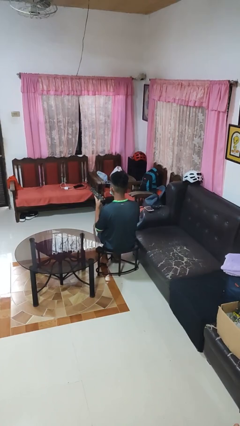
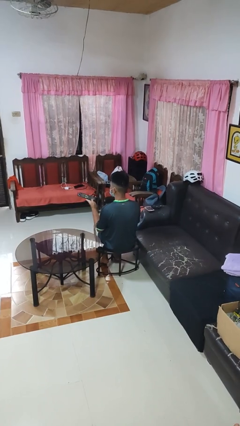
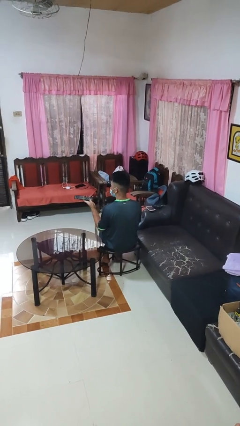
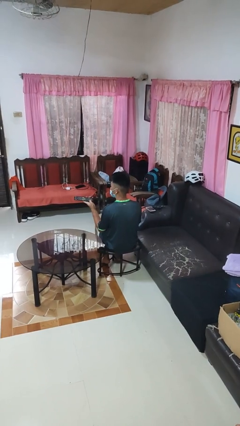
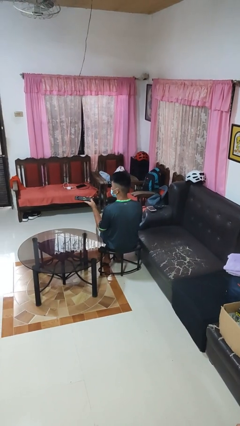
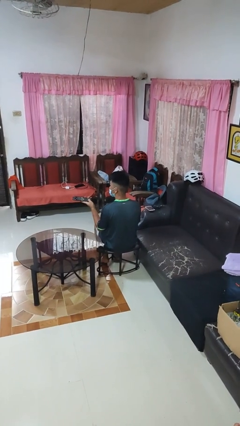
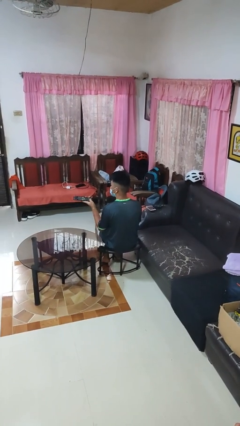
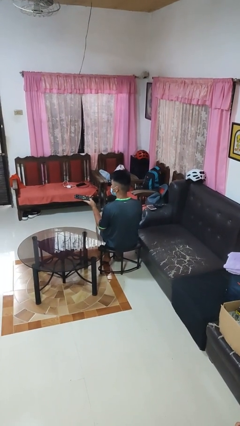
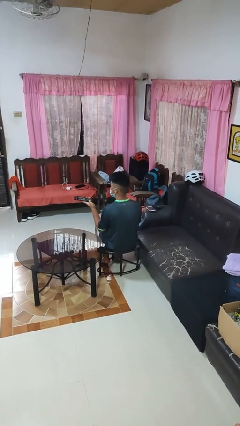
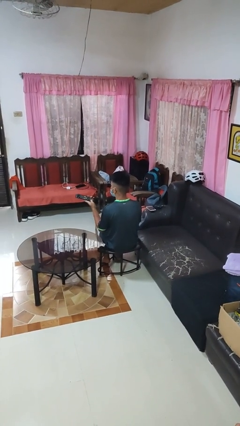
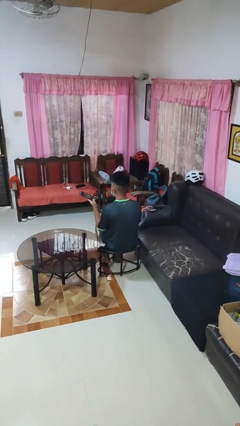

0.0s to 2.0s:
person uses television remote

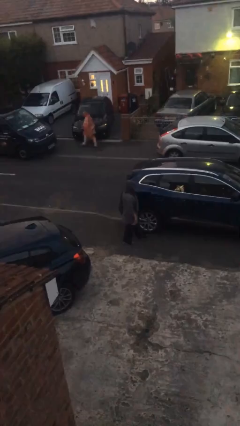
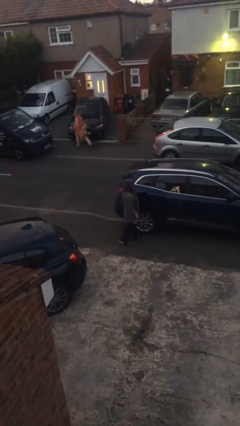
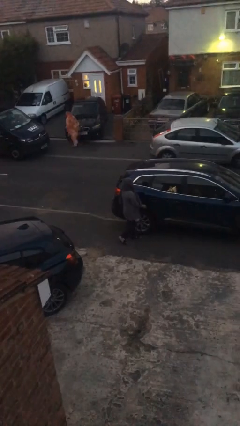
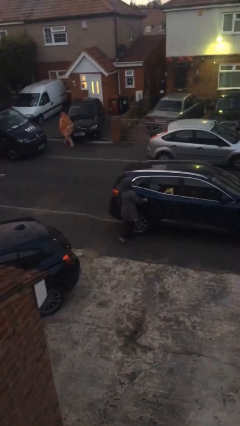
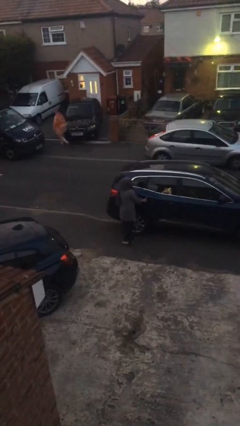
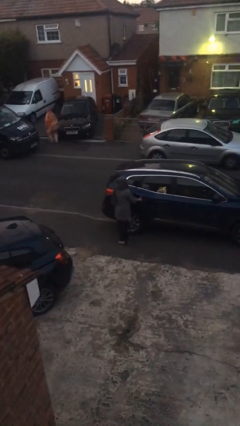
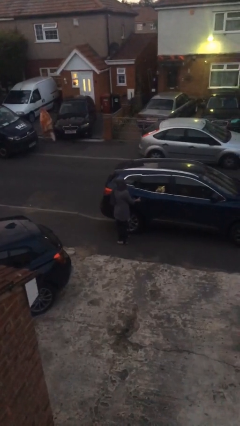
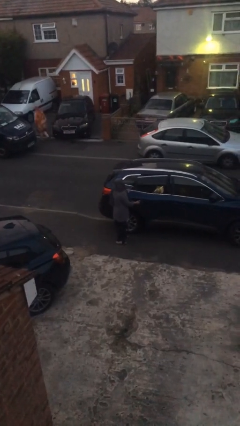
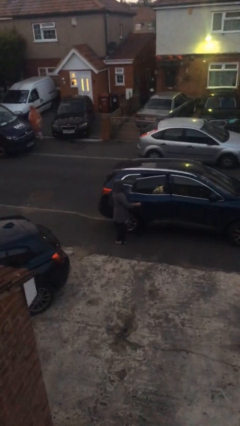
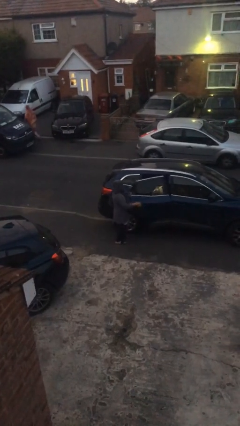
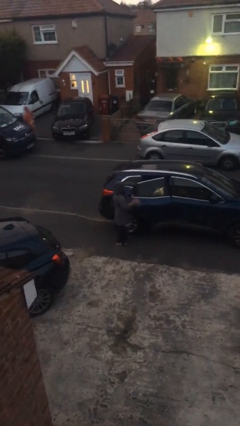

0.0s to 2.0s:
person opens car door

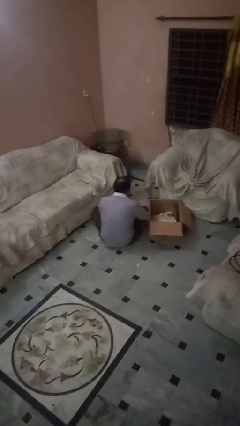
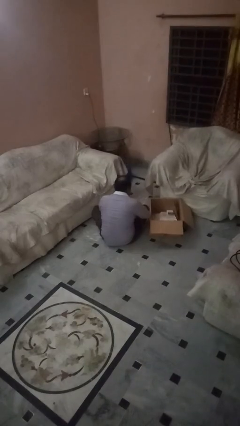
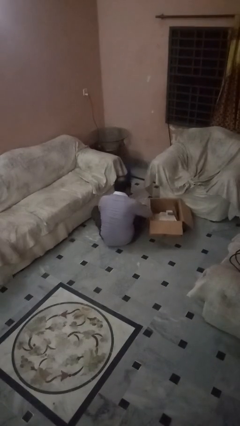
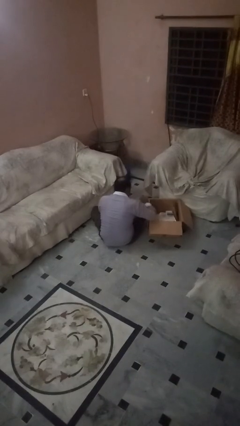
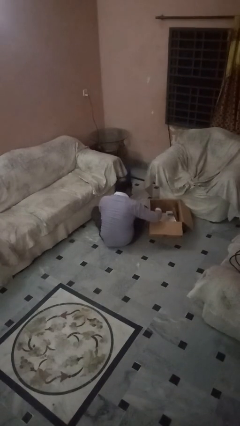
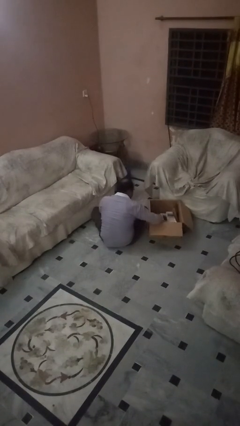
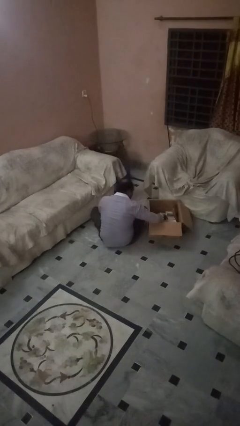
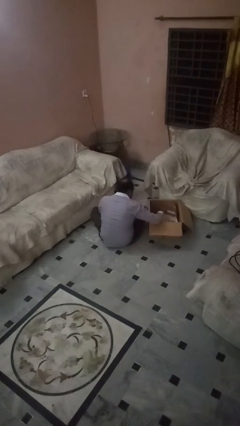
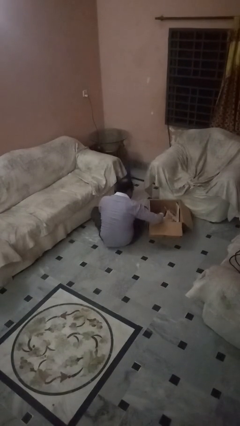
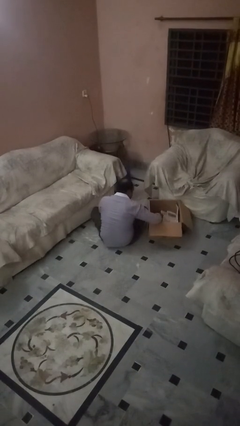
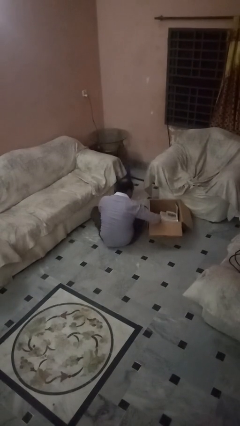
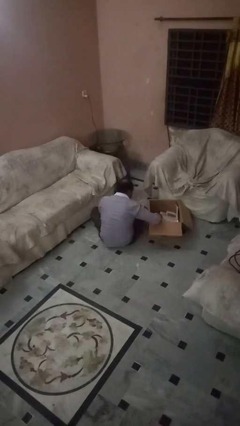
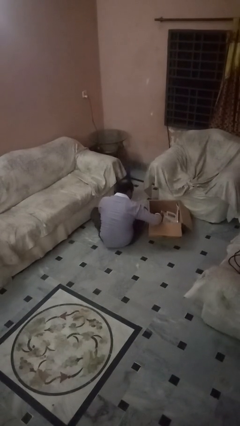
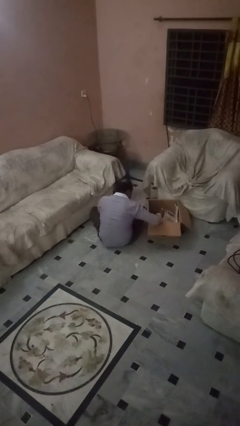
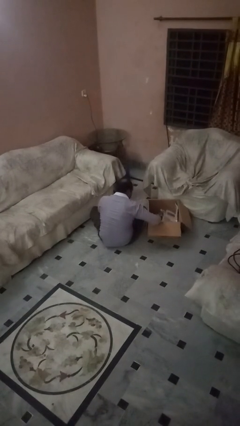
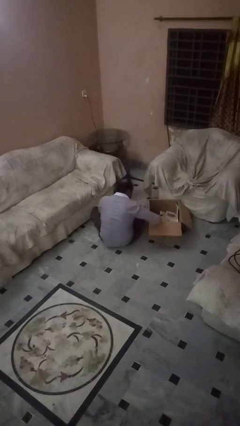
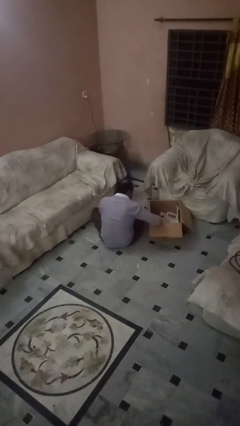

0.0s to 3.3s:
person searches in box

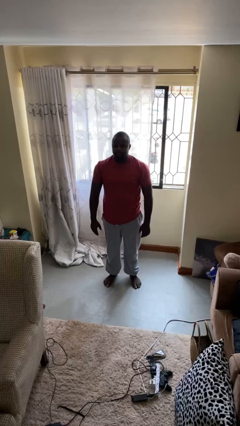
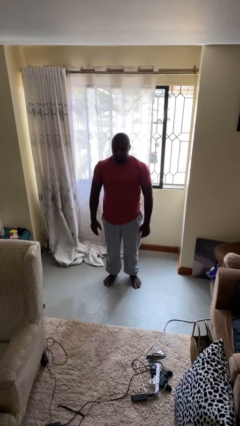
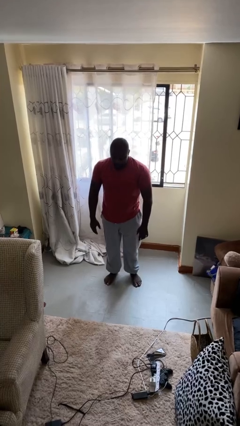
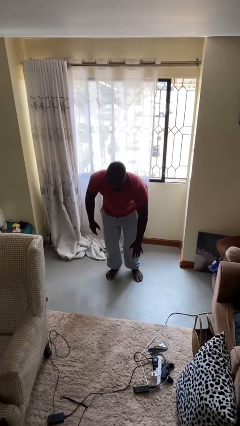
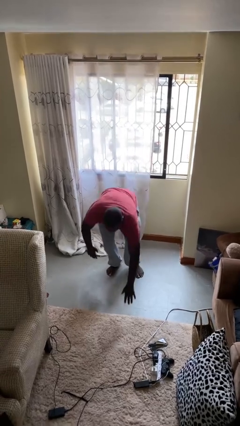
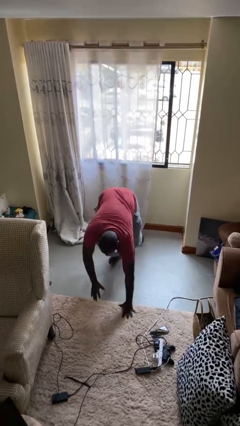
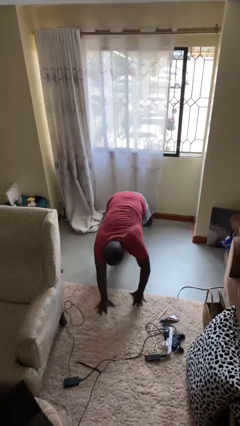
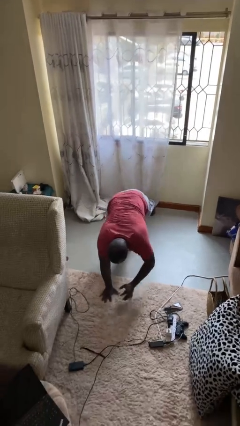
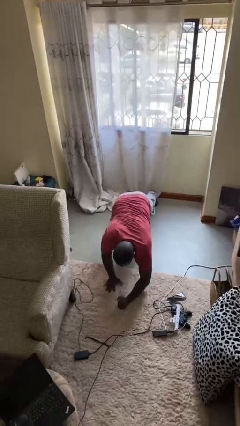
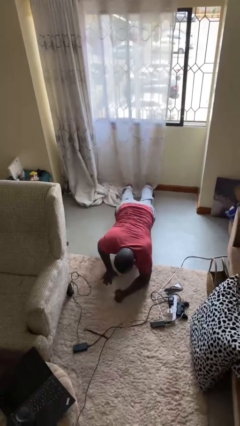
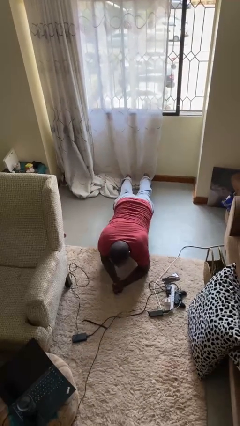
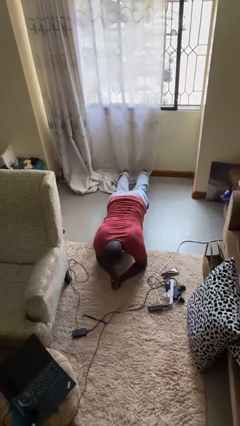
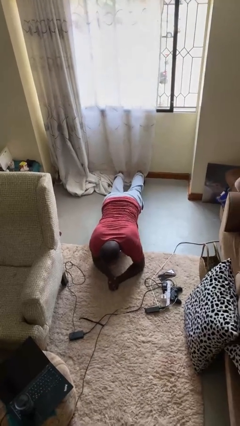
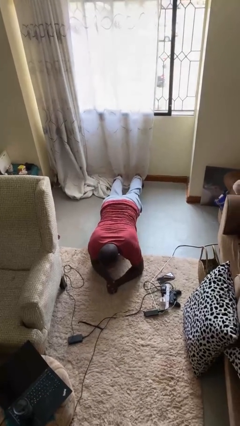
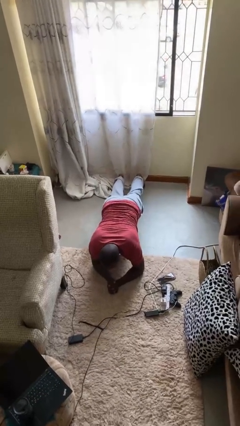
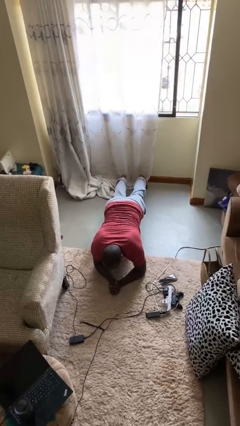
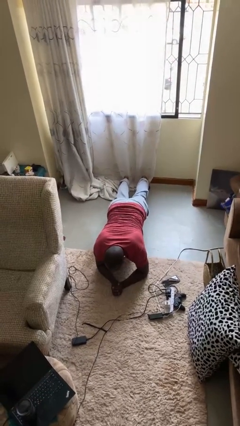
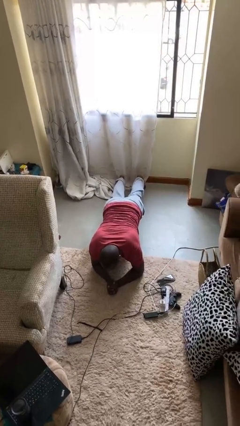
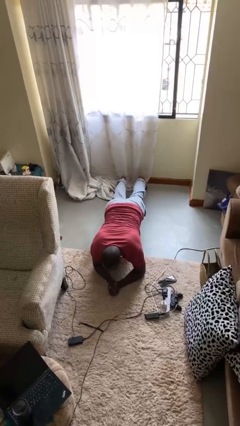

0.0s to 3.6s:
person exercises with plank

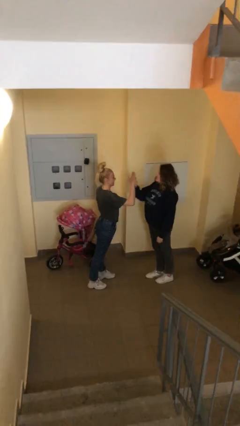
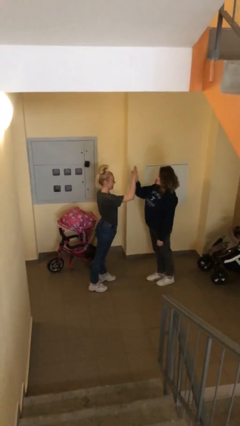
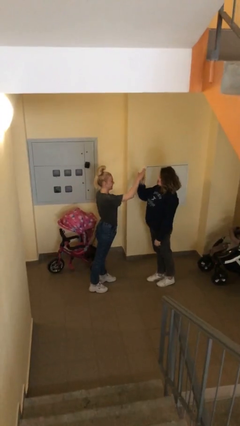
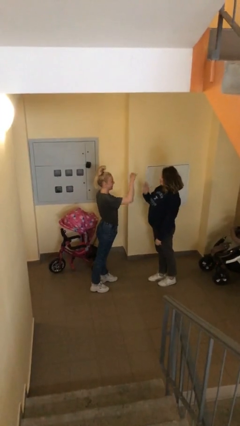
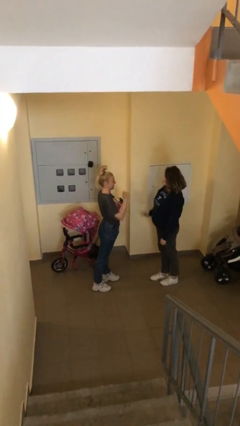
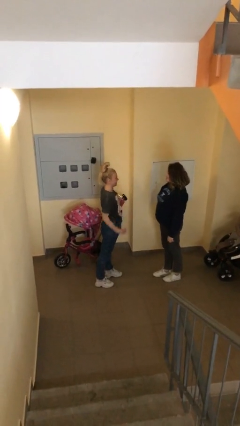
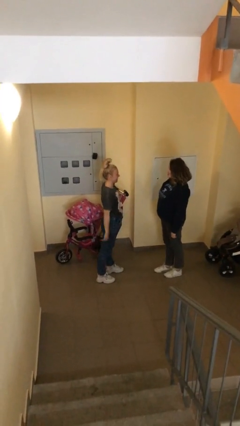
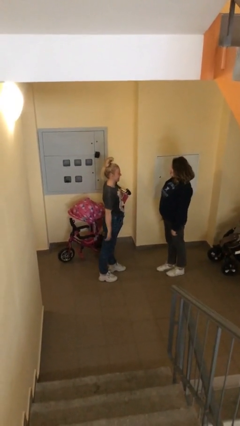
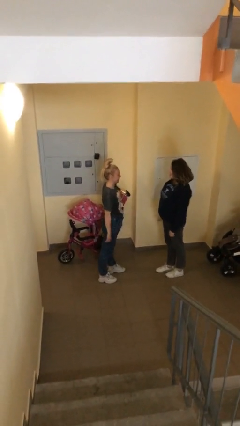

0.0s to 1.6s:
person highfives hand

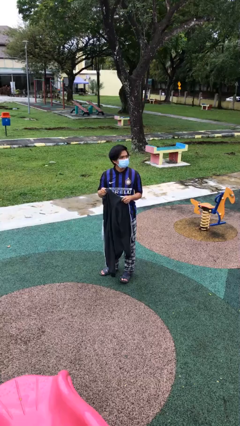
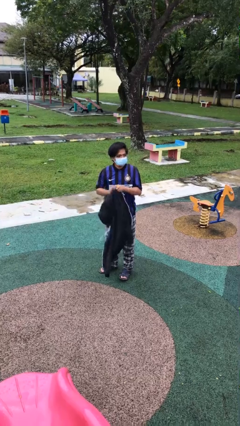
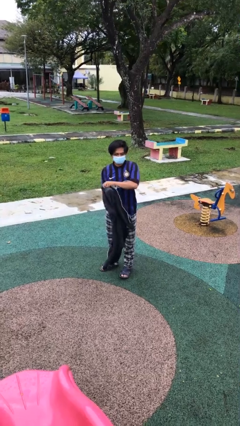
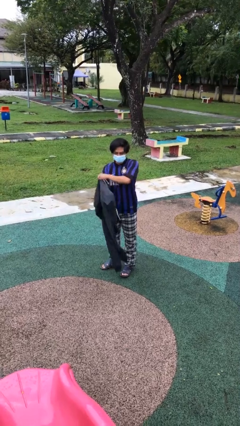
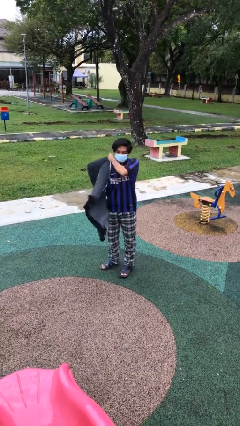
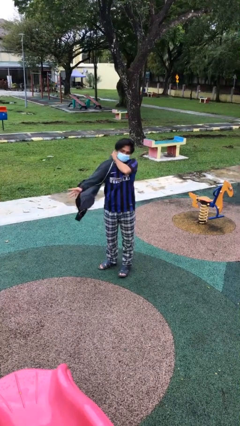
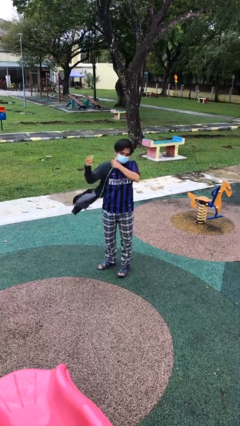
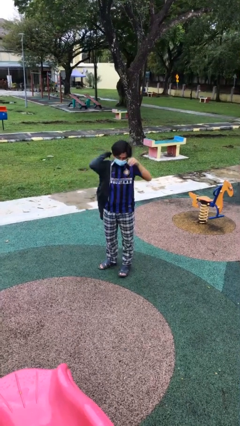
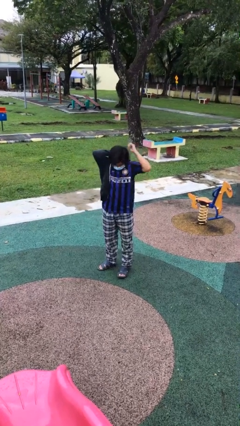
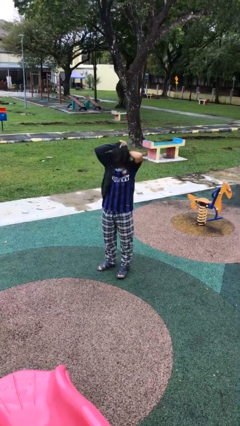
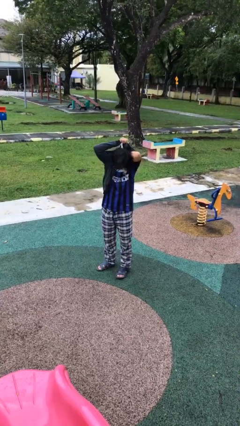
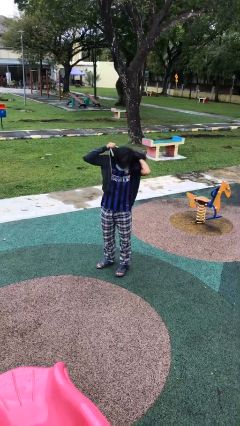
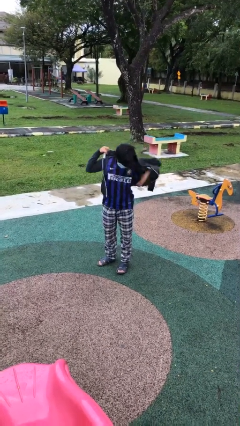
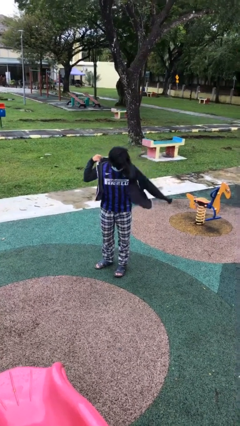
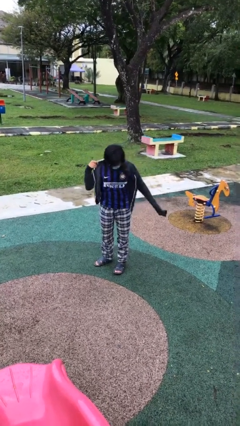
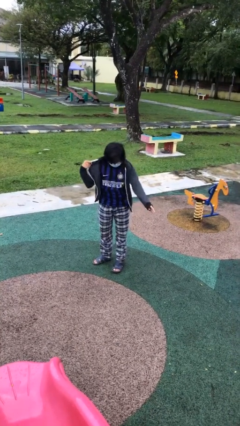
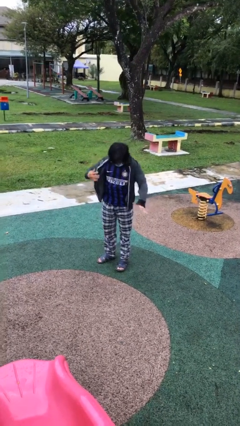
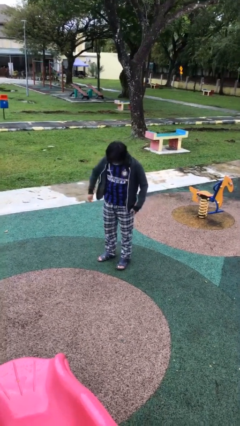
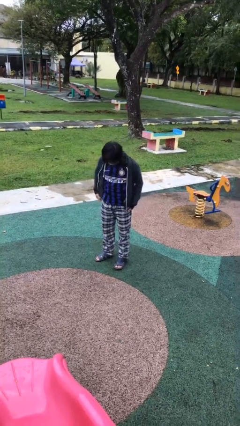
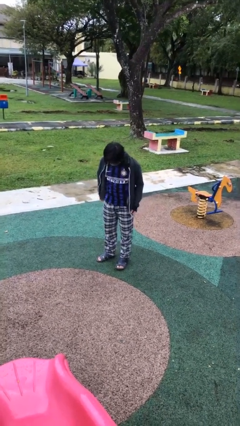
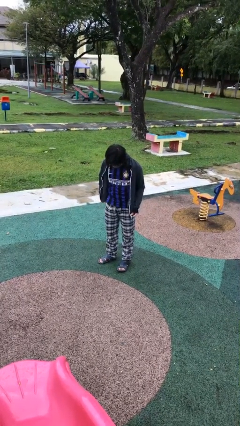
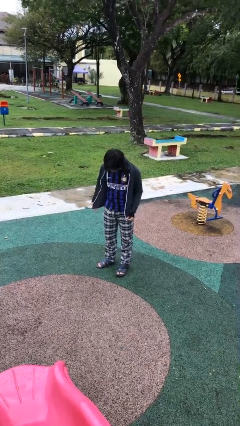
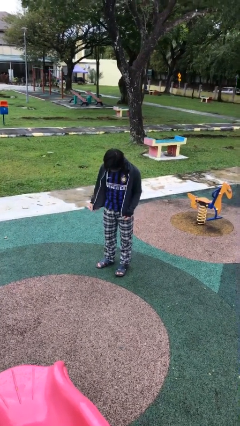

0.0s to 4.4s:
person puts on jacket

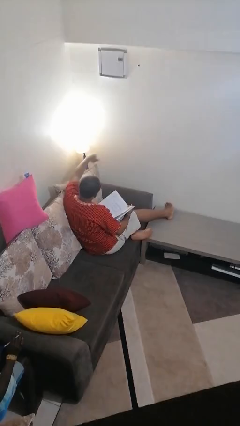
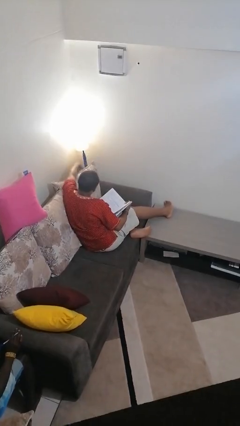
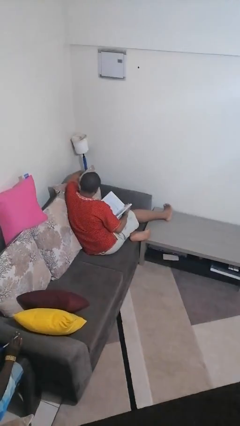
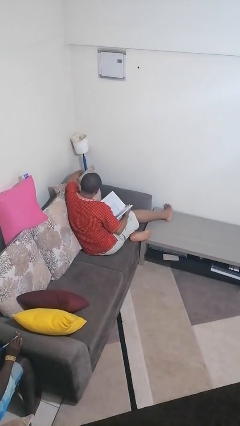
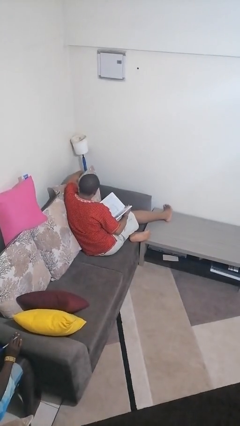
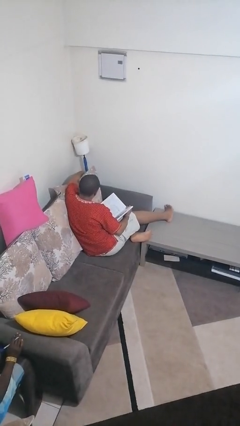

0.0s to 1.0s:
person turns off lamp
